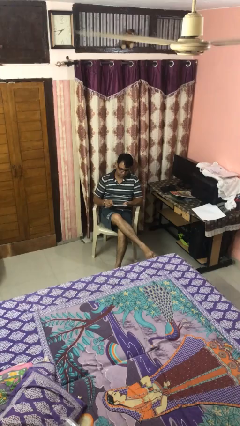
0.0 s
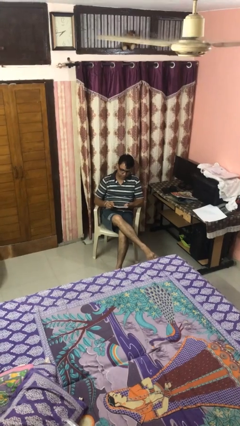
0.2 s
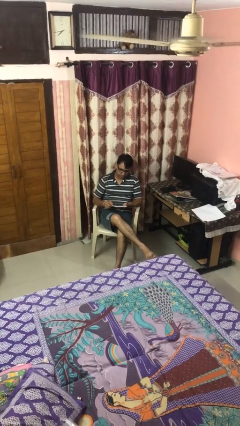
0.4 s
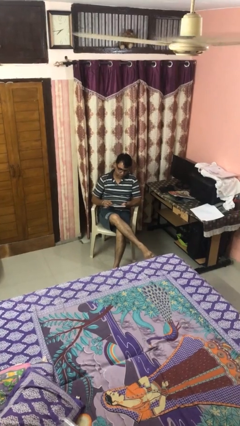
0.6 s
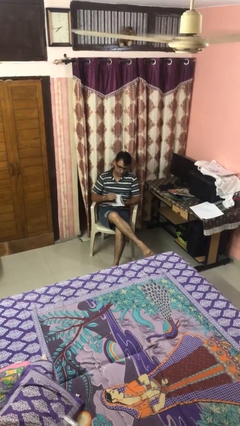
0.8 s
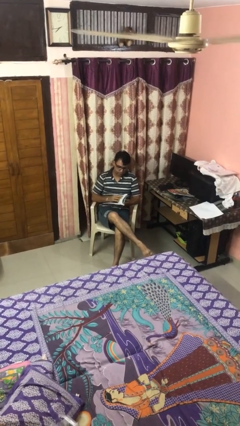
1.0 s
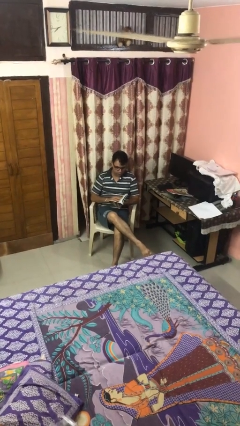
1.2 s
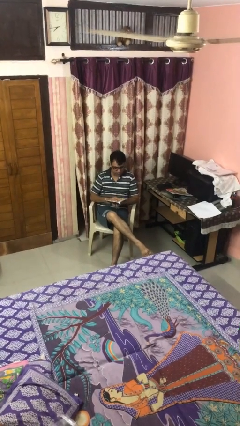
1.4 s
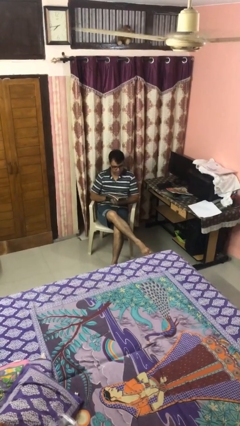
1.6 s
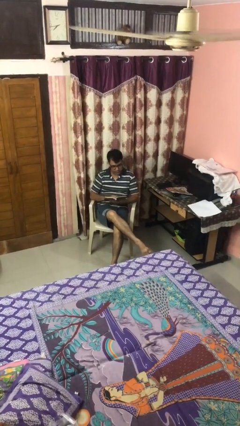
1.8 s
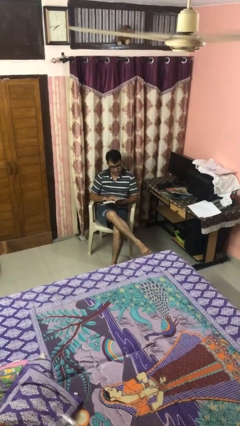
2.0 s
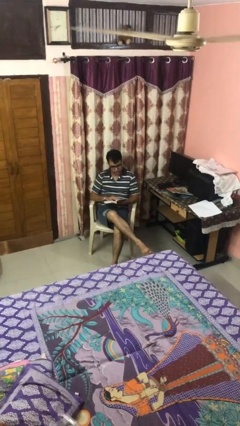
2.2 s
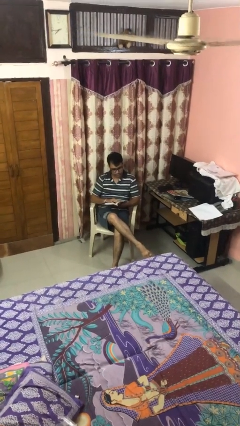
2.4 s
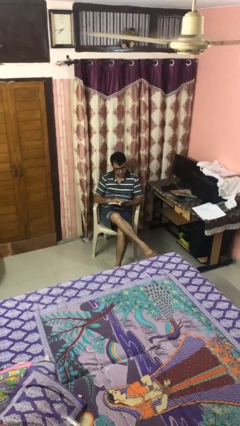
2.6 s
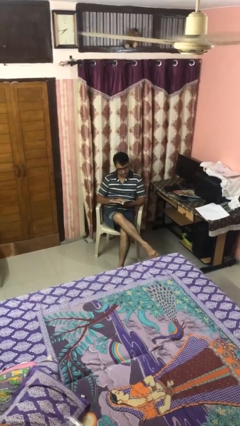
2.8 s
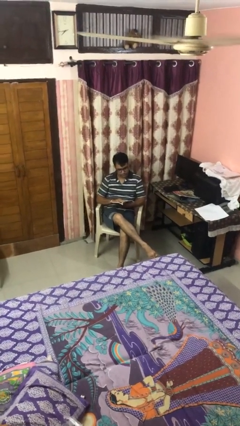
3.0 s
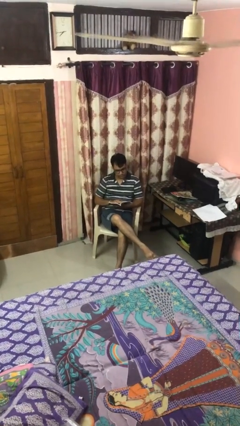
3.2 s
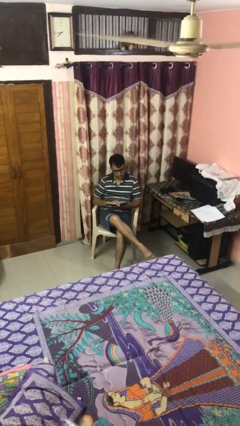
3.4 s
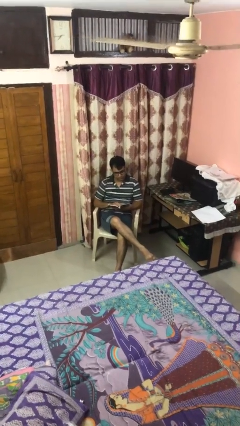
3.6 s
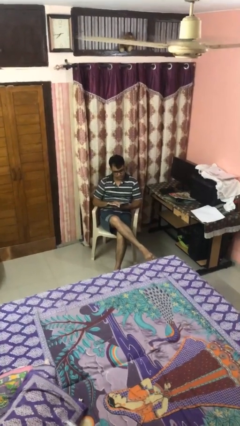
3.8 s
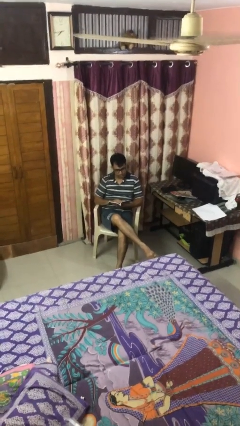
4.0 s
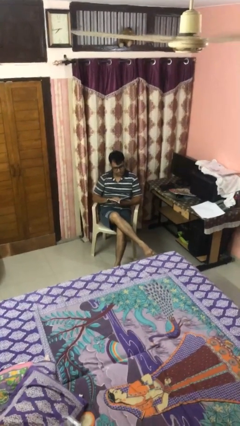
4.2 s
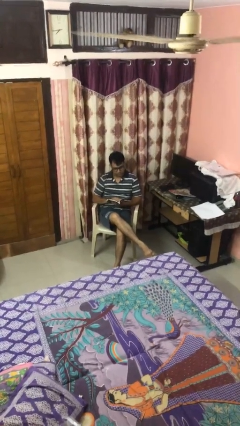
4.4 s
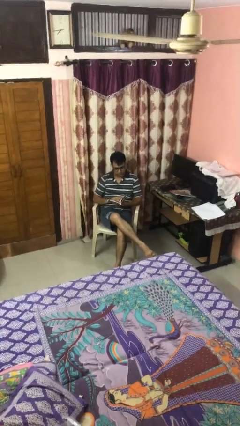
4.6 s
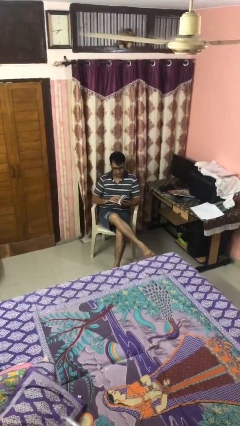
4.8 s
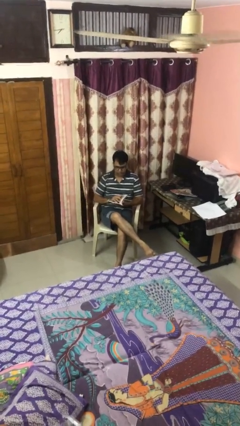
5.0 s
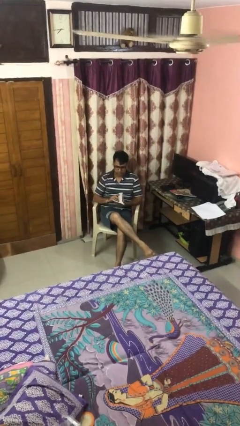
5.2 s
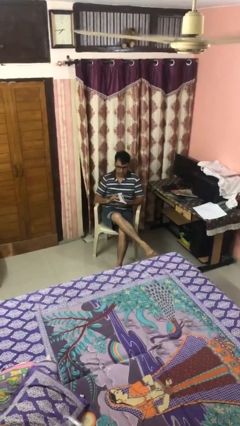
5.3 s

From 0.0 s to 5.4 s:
person reads book

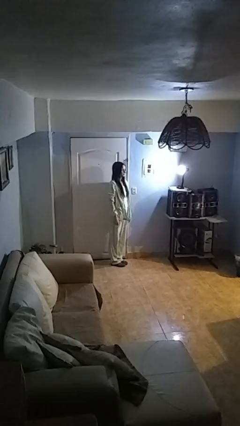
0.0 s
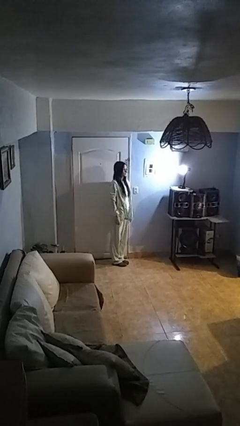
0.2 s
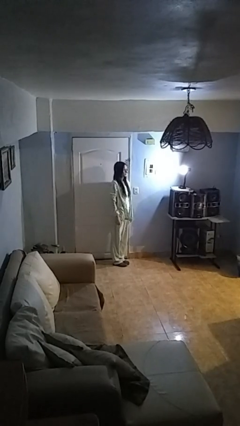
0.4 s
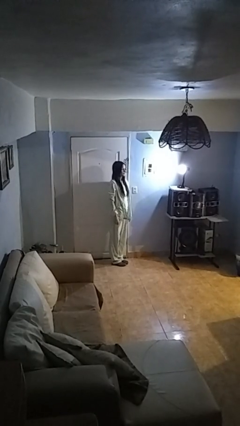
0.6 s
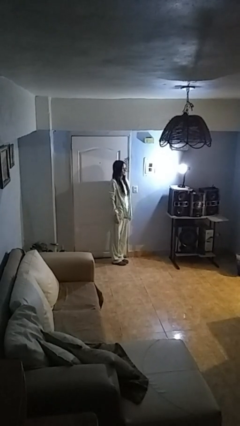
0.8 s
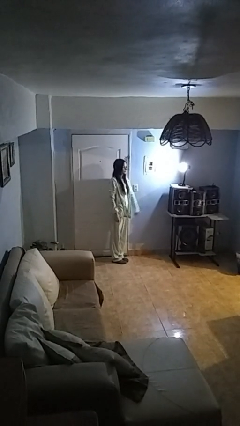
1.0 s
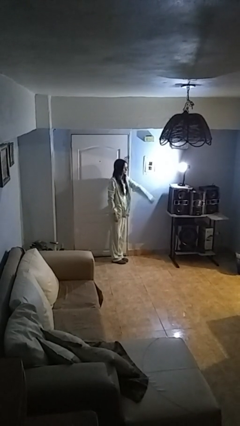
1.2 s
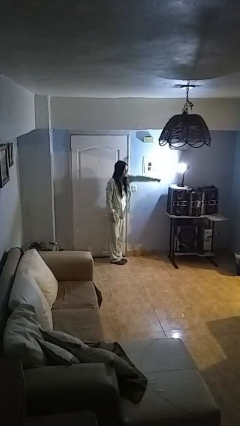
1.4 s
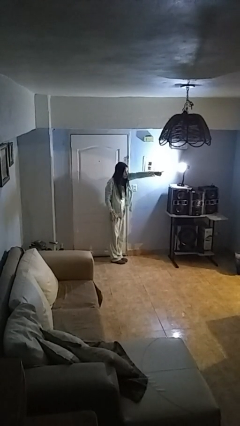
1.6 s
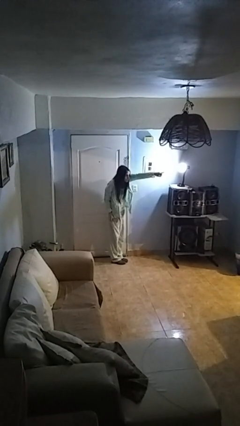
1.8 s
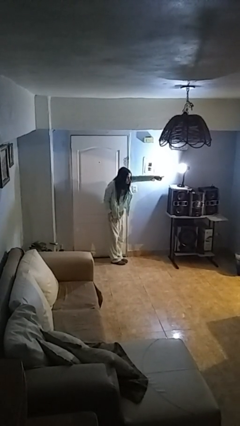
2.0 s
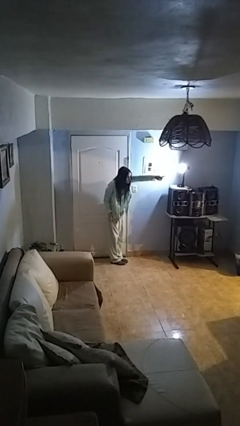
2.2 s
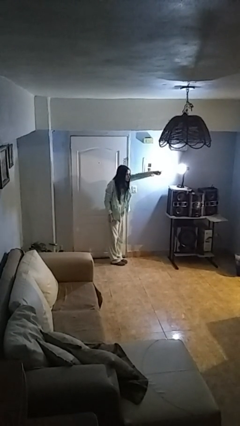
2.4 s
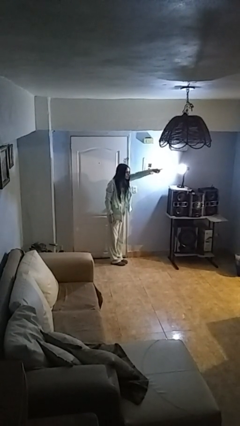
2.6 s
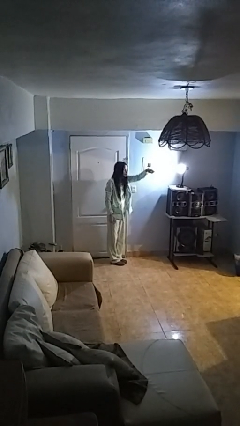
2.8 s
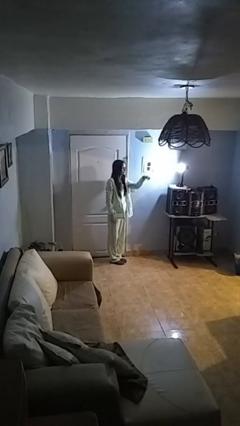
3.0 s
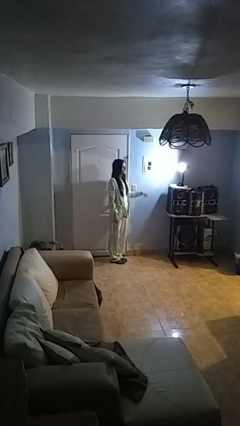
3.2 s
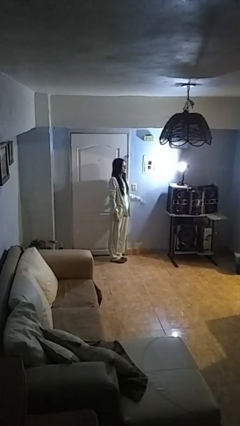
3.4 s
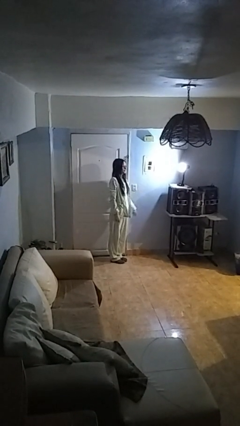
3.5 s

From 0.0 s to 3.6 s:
person points at person

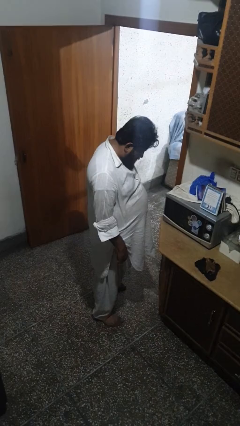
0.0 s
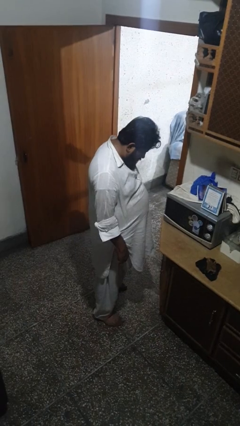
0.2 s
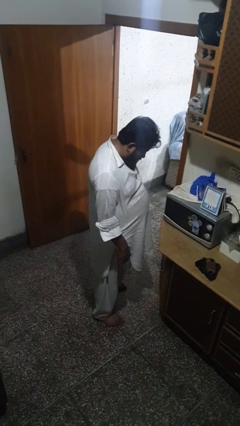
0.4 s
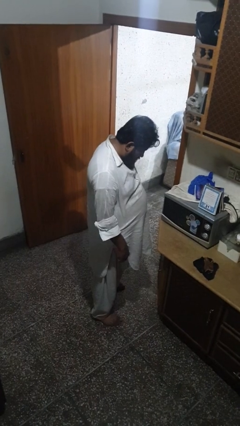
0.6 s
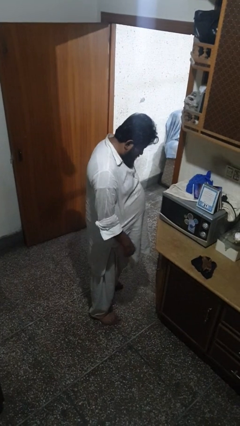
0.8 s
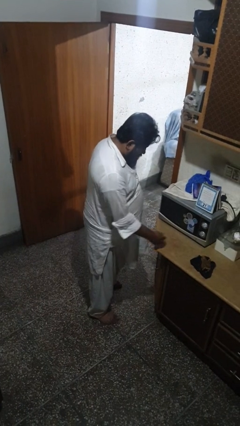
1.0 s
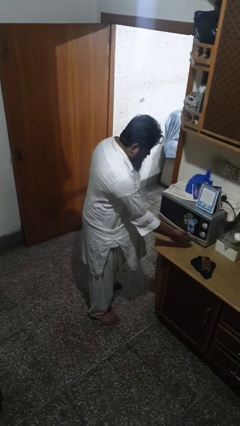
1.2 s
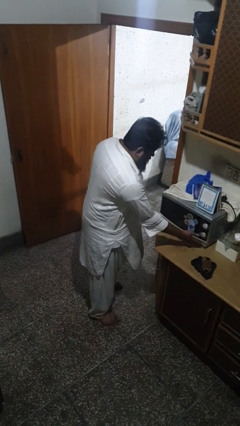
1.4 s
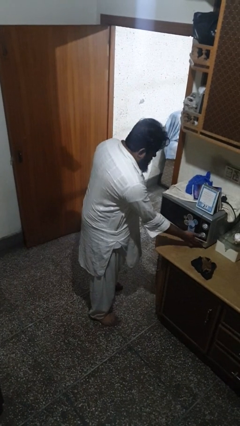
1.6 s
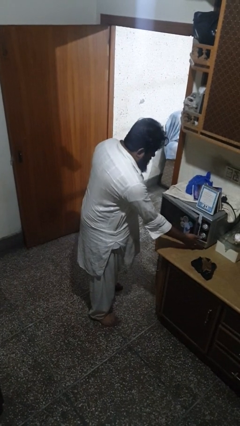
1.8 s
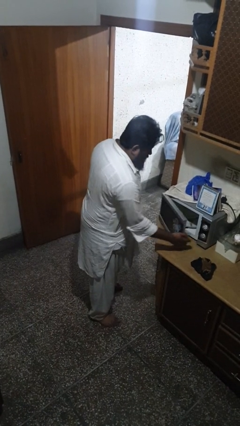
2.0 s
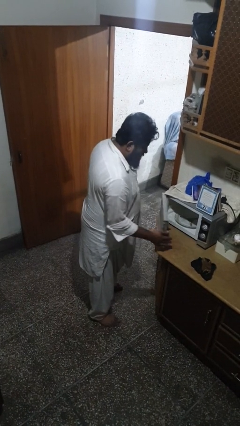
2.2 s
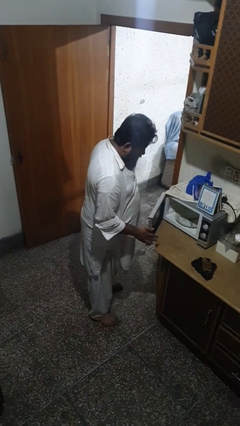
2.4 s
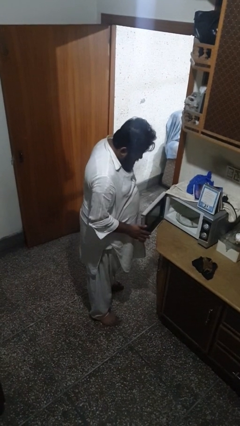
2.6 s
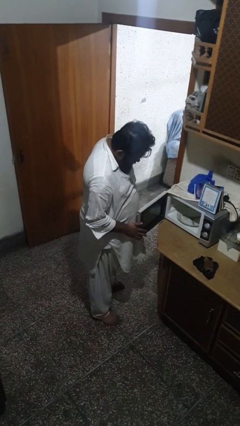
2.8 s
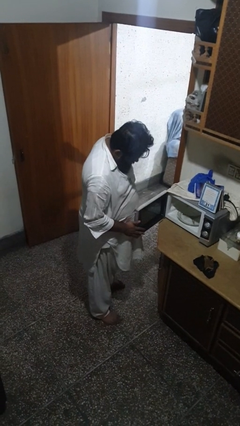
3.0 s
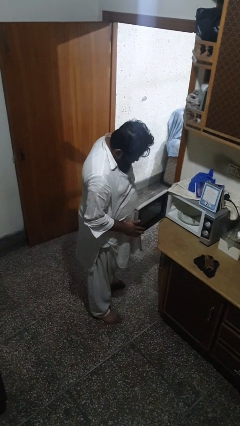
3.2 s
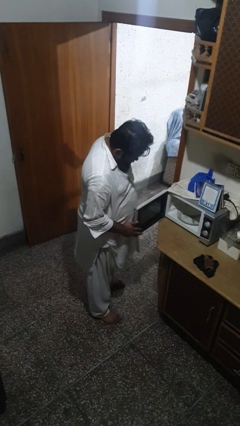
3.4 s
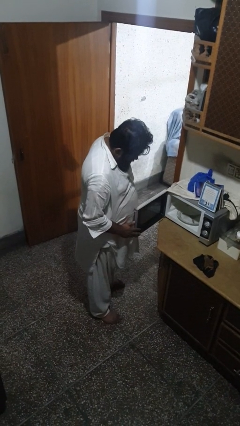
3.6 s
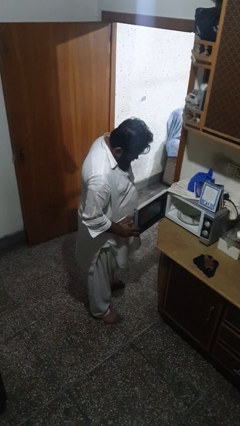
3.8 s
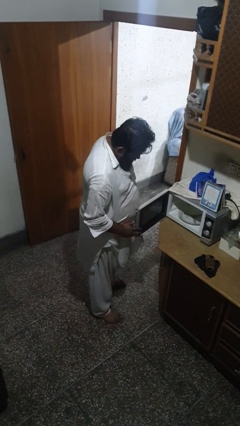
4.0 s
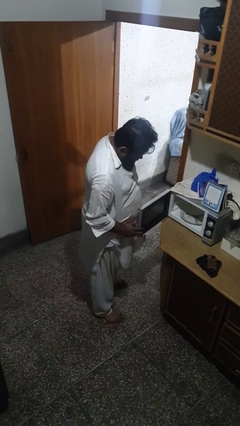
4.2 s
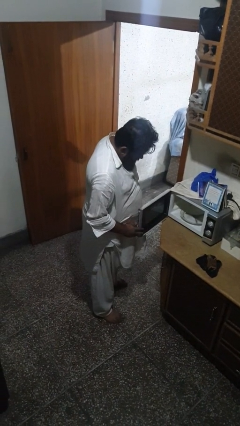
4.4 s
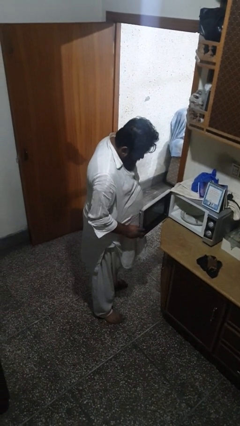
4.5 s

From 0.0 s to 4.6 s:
person opens oven door

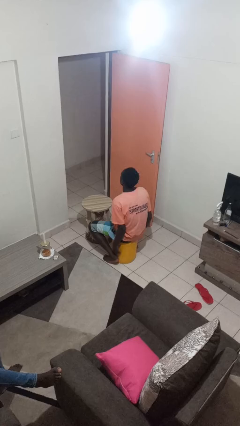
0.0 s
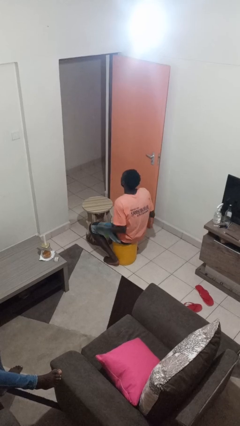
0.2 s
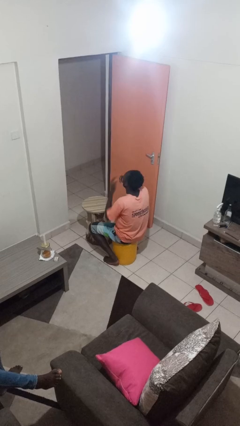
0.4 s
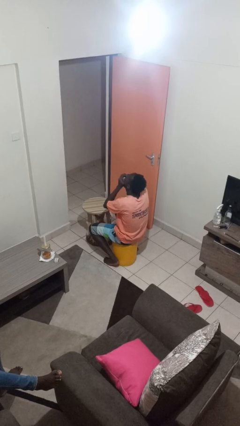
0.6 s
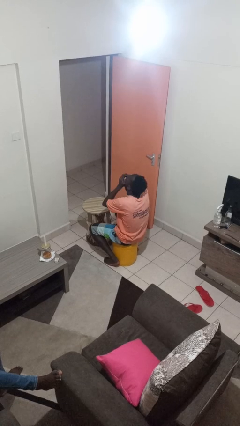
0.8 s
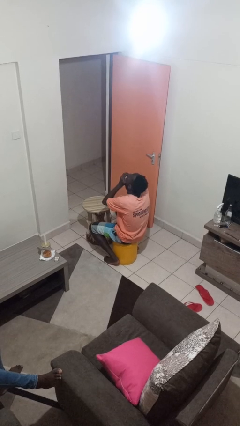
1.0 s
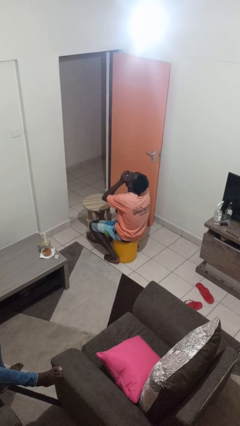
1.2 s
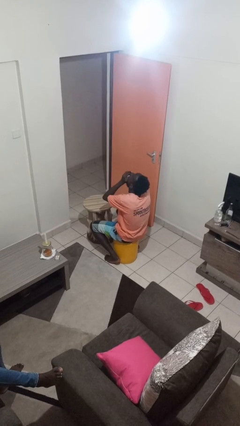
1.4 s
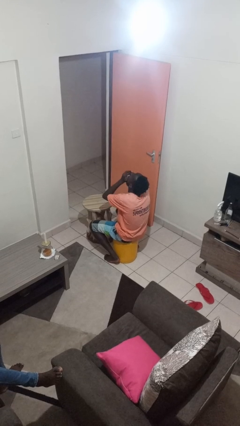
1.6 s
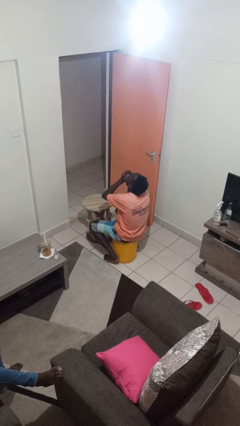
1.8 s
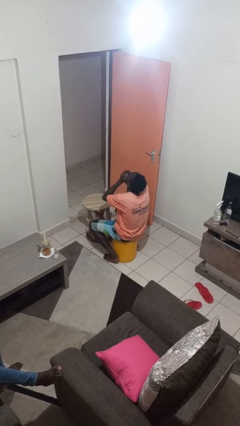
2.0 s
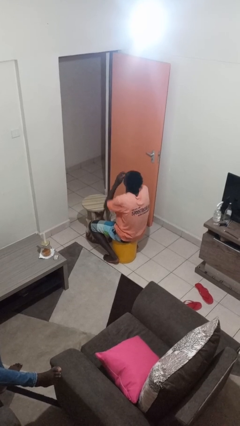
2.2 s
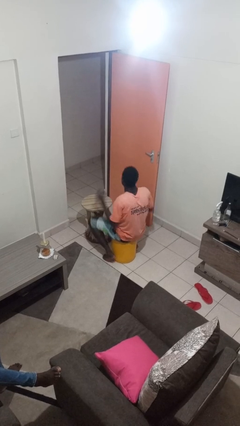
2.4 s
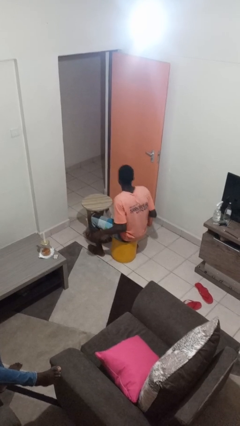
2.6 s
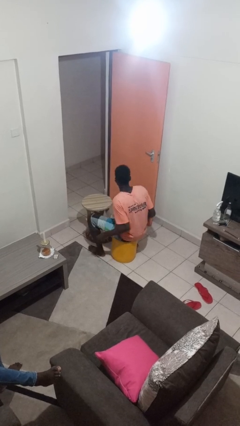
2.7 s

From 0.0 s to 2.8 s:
person yawns

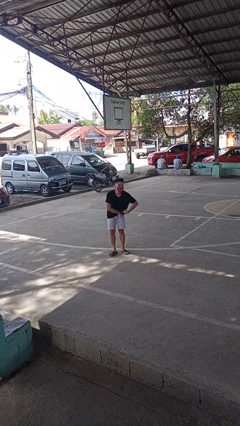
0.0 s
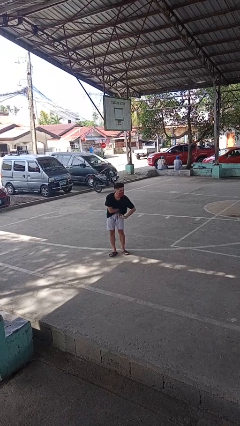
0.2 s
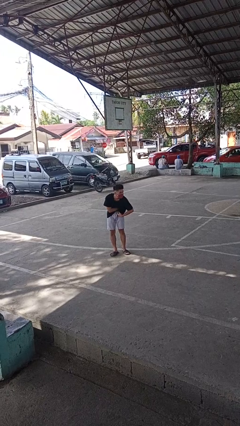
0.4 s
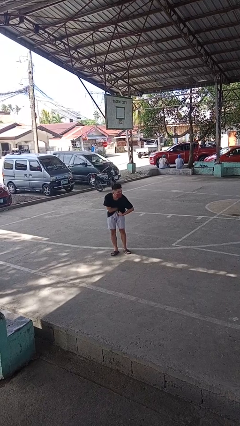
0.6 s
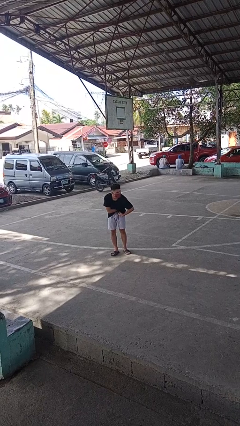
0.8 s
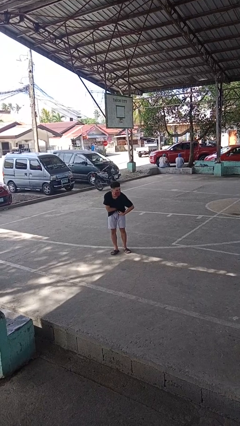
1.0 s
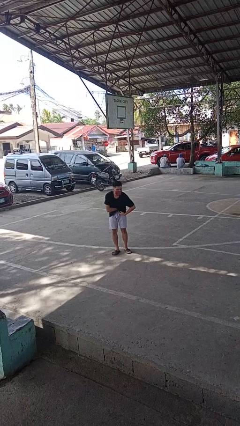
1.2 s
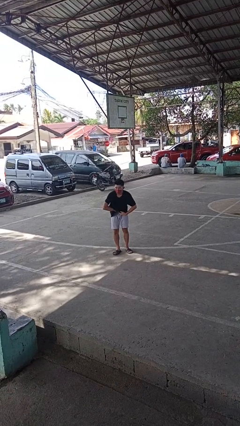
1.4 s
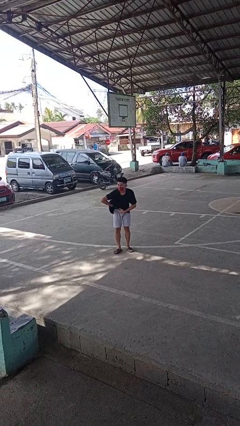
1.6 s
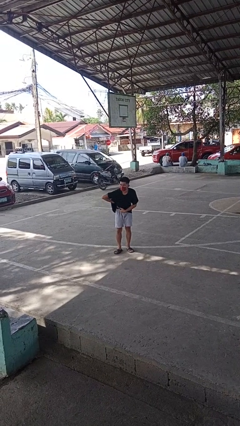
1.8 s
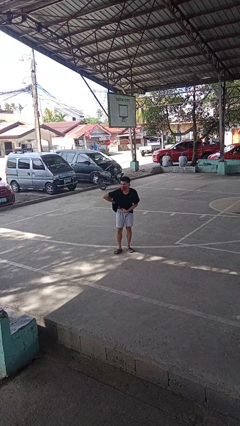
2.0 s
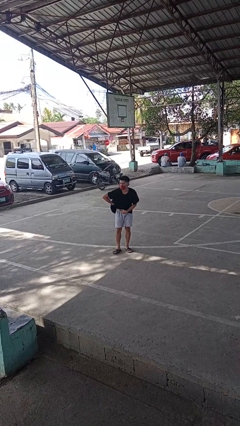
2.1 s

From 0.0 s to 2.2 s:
person applies deodorant
